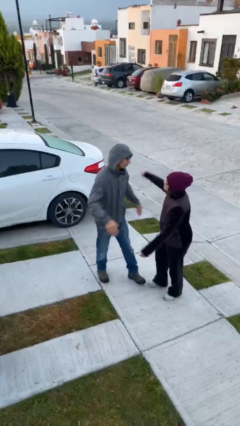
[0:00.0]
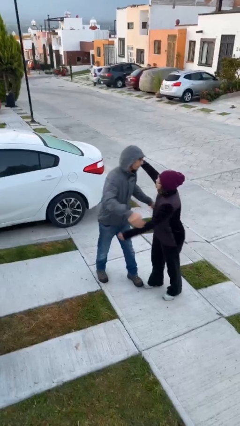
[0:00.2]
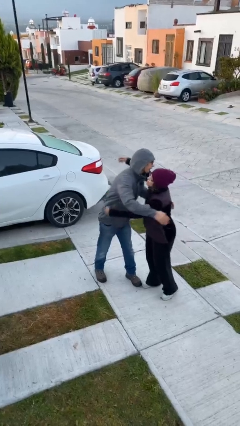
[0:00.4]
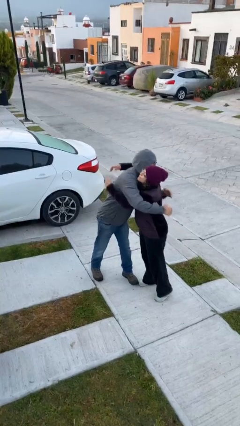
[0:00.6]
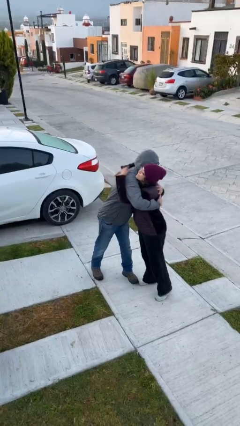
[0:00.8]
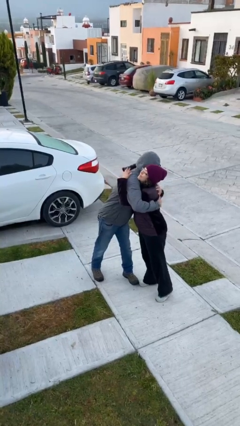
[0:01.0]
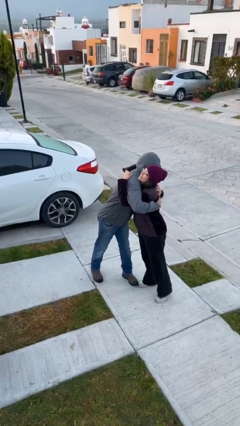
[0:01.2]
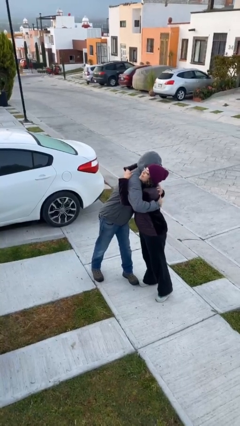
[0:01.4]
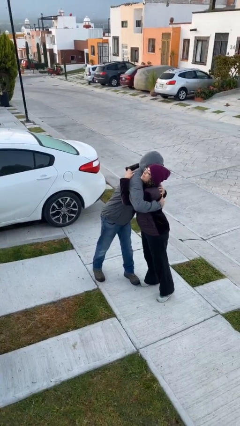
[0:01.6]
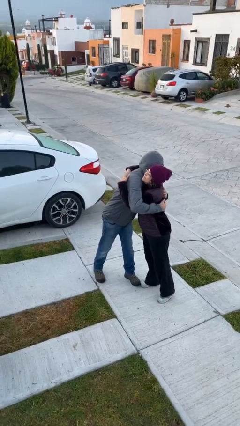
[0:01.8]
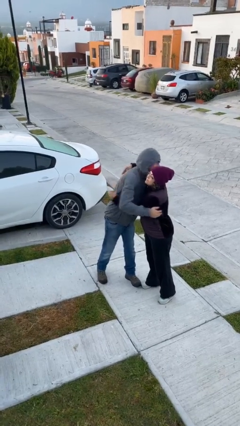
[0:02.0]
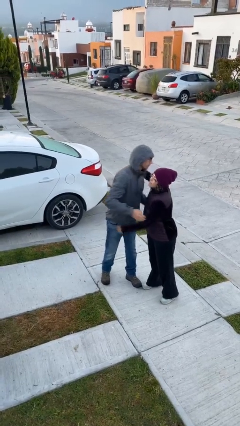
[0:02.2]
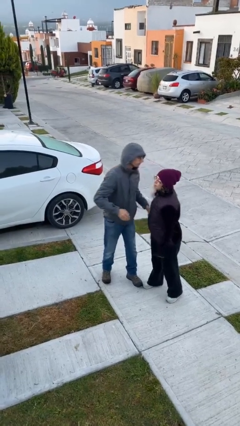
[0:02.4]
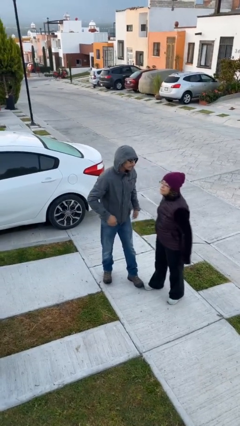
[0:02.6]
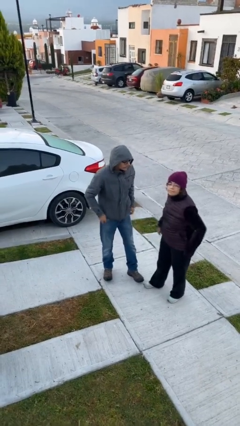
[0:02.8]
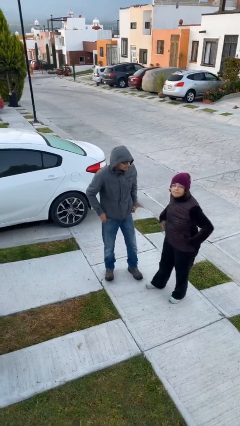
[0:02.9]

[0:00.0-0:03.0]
person embraces person

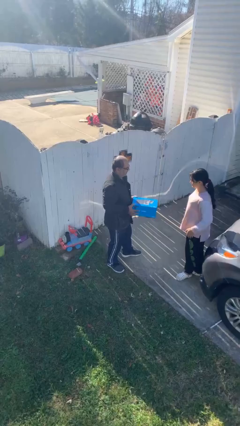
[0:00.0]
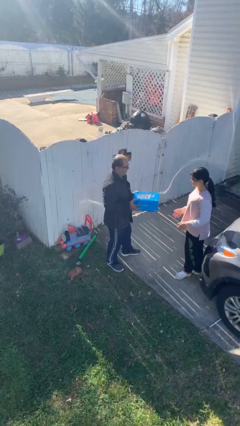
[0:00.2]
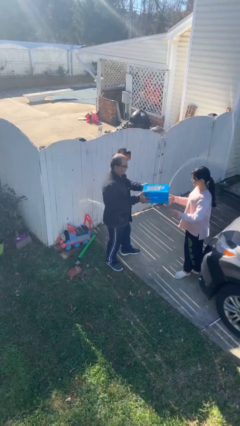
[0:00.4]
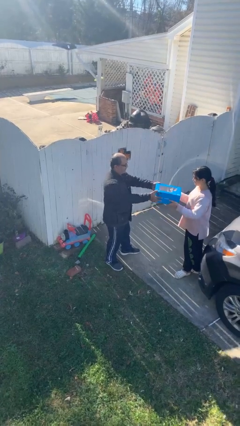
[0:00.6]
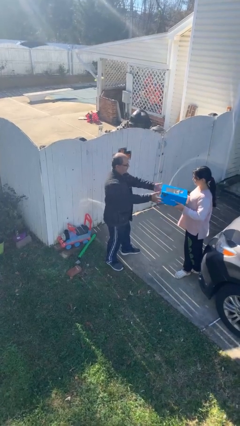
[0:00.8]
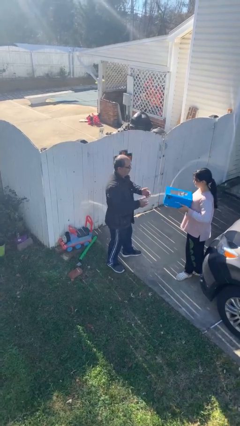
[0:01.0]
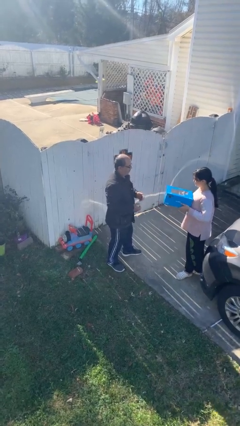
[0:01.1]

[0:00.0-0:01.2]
person transfers object to person

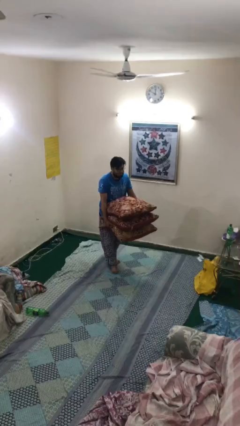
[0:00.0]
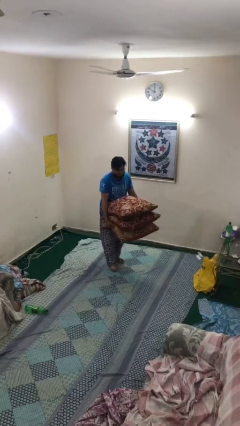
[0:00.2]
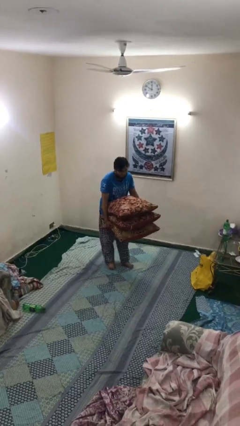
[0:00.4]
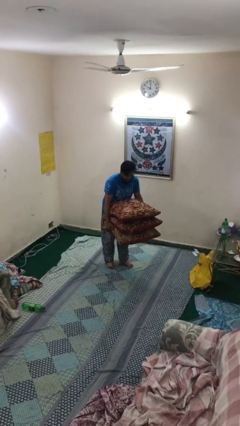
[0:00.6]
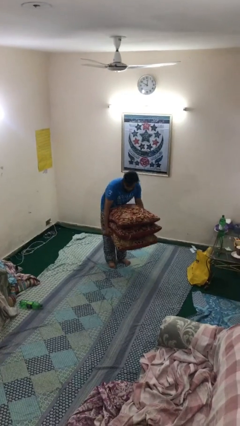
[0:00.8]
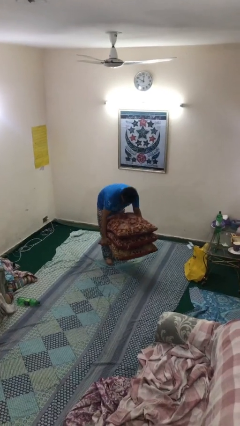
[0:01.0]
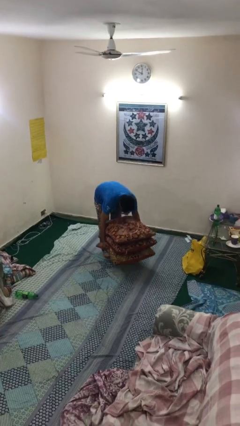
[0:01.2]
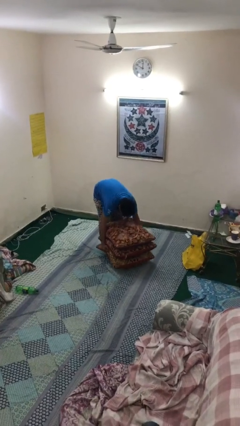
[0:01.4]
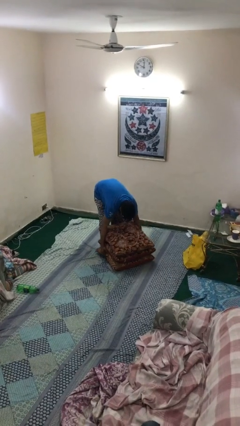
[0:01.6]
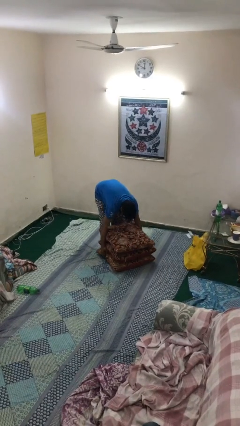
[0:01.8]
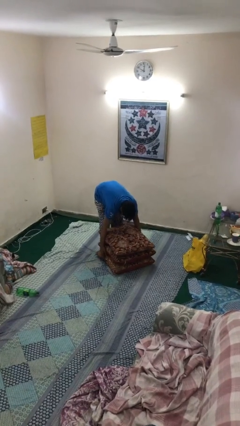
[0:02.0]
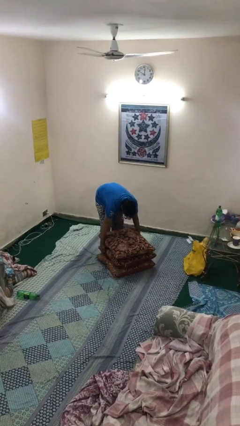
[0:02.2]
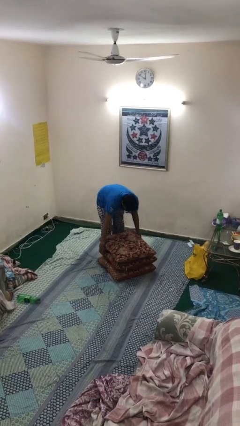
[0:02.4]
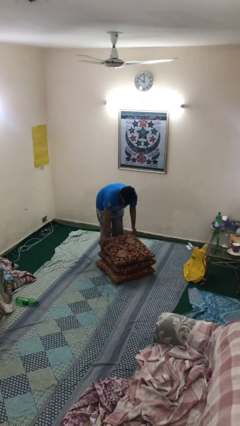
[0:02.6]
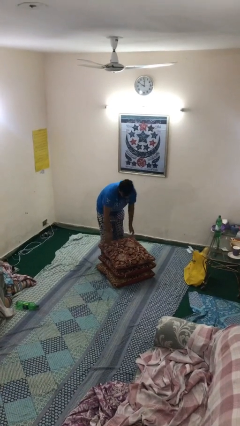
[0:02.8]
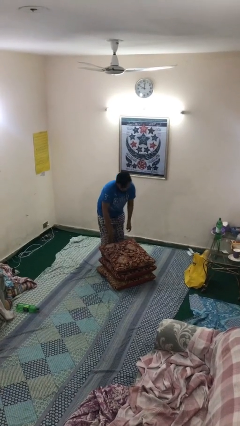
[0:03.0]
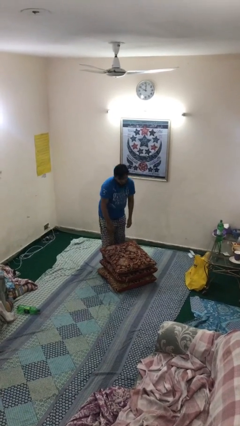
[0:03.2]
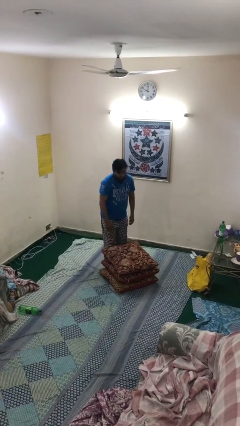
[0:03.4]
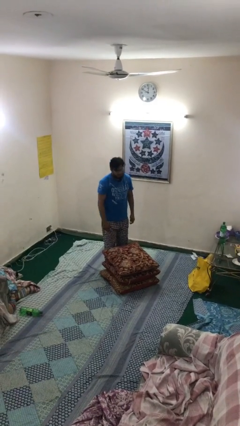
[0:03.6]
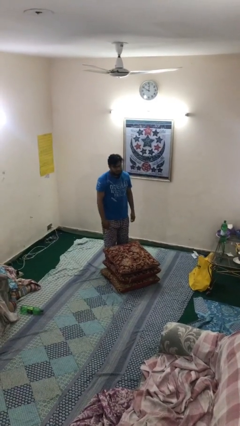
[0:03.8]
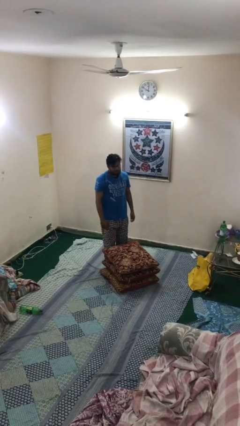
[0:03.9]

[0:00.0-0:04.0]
person puts down object on floor

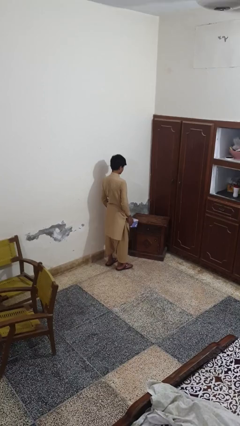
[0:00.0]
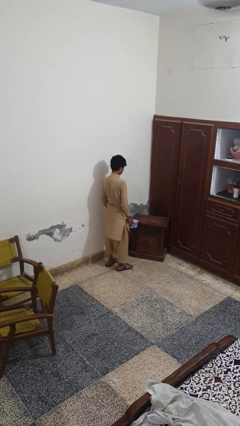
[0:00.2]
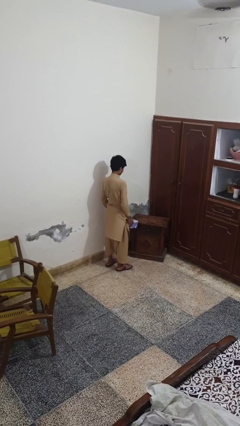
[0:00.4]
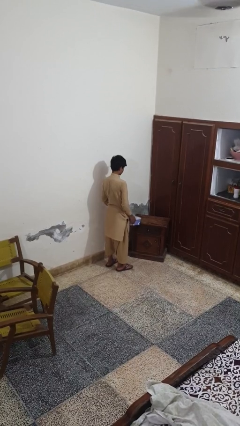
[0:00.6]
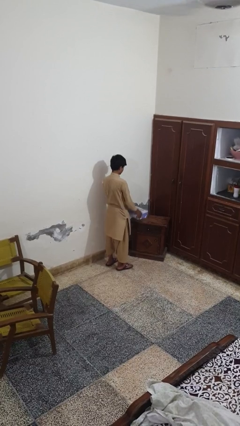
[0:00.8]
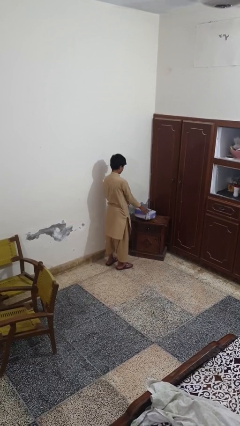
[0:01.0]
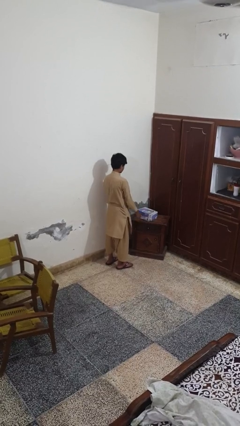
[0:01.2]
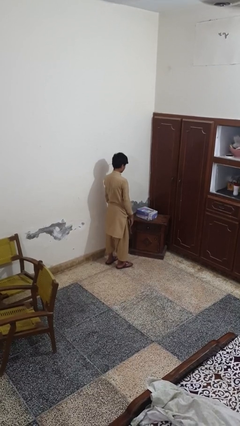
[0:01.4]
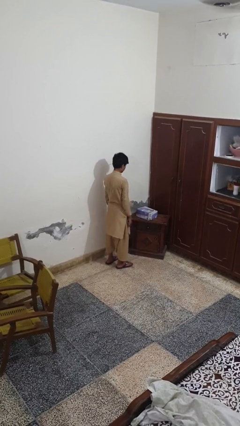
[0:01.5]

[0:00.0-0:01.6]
person throws object on table

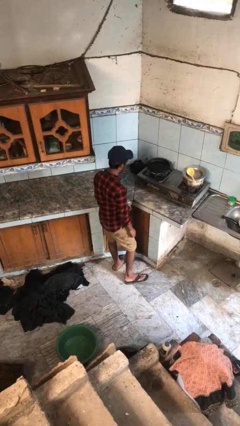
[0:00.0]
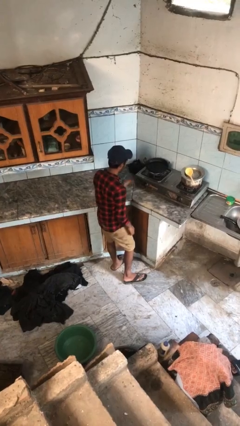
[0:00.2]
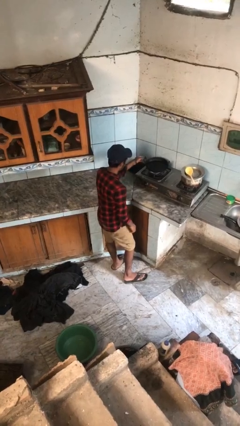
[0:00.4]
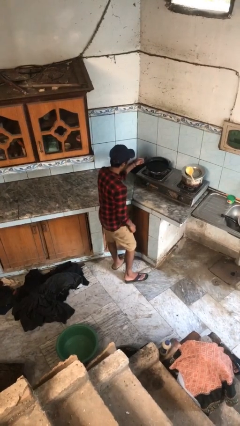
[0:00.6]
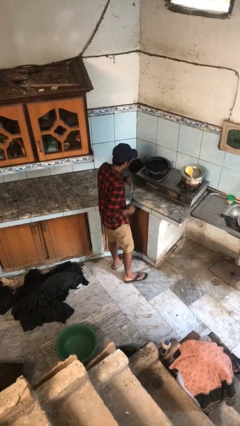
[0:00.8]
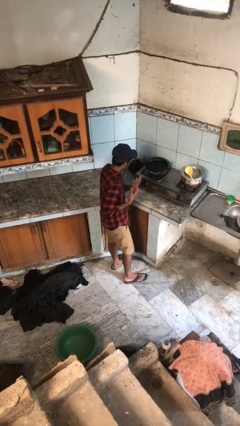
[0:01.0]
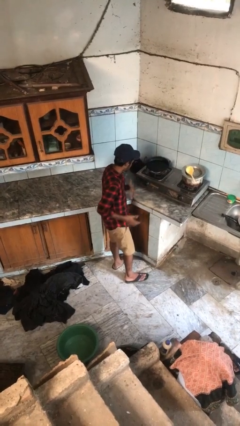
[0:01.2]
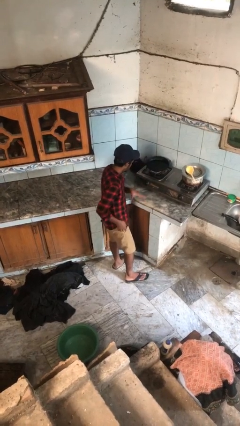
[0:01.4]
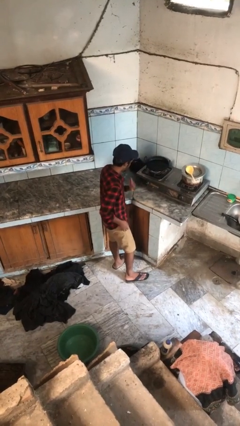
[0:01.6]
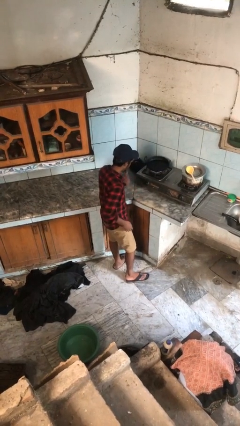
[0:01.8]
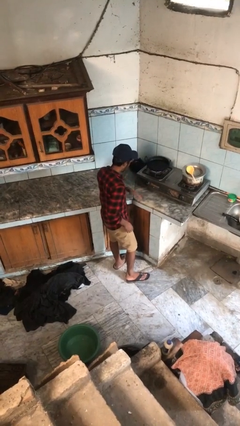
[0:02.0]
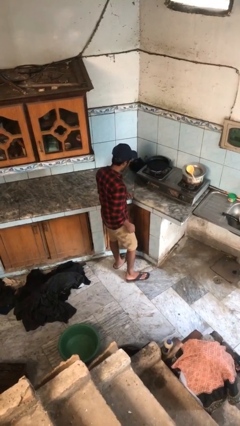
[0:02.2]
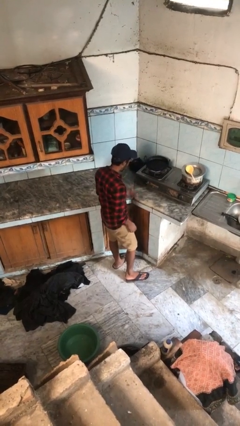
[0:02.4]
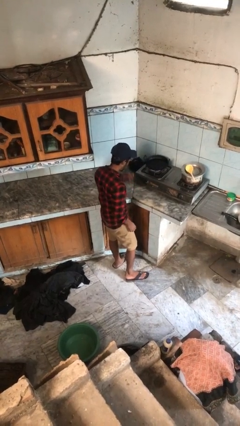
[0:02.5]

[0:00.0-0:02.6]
person burns hand

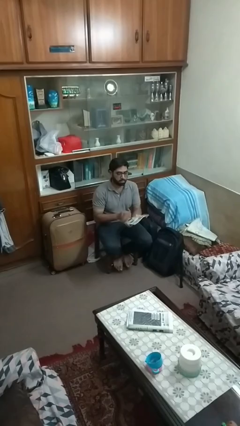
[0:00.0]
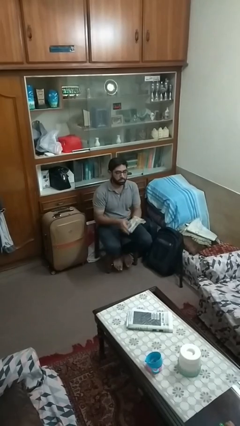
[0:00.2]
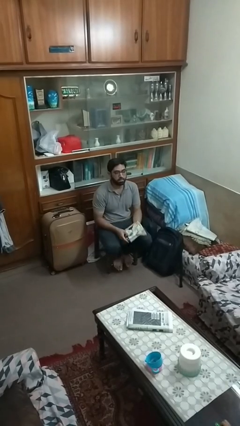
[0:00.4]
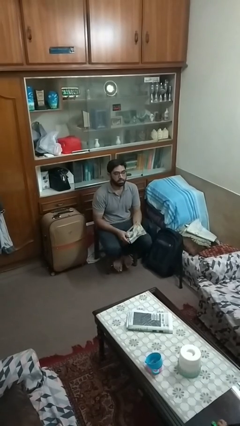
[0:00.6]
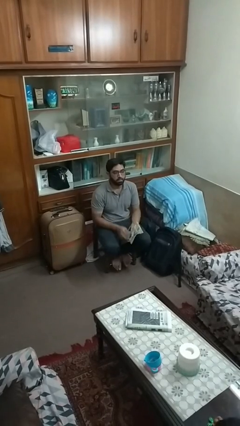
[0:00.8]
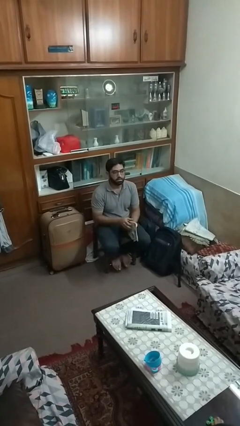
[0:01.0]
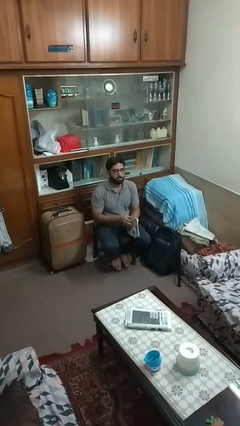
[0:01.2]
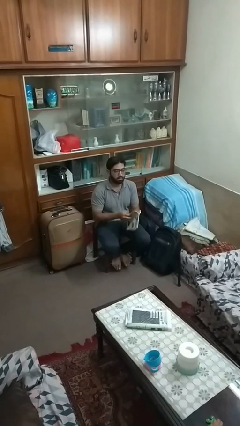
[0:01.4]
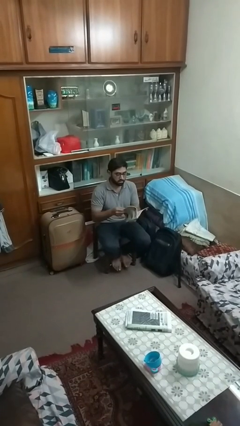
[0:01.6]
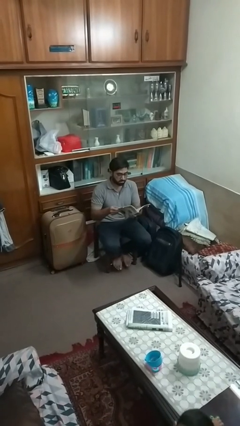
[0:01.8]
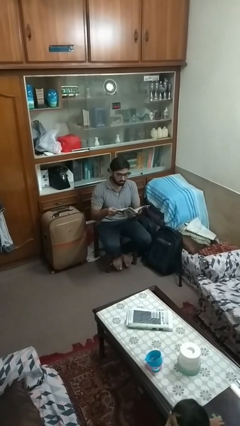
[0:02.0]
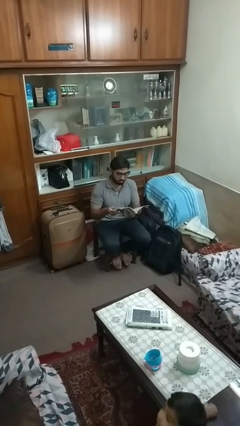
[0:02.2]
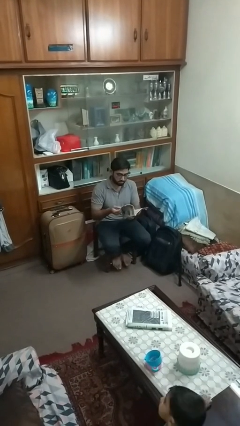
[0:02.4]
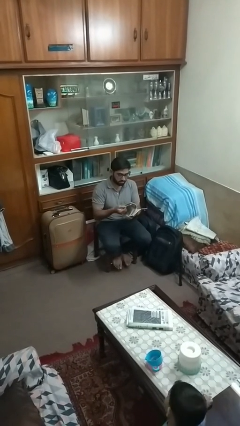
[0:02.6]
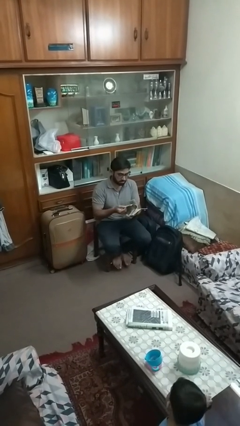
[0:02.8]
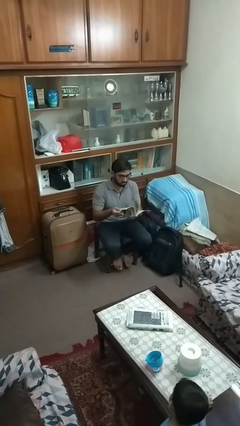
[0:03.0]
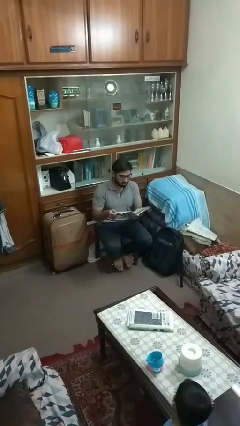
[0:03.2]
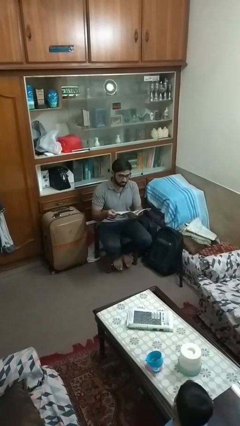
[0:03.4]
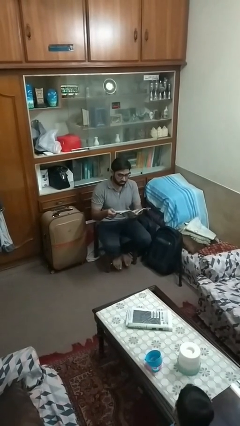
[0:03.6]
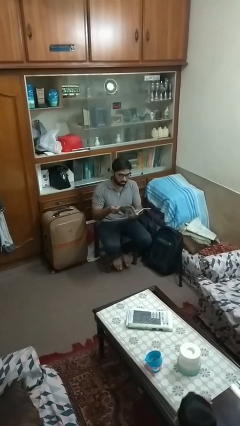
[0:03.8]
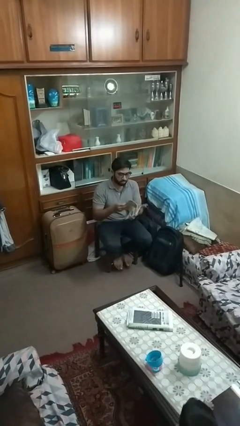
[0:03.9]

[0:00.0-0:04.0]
person reads magazine

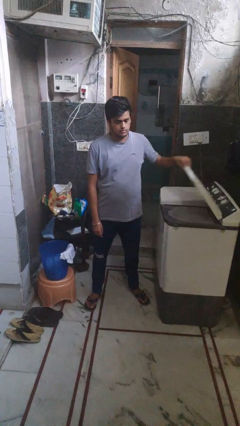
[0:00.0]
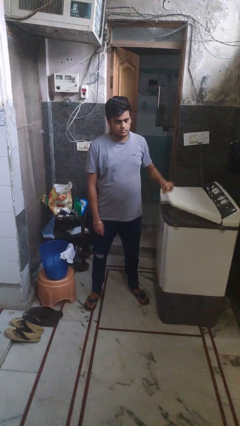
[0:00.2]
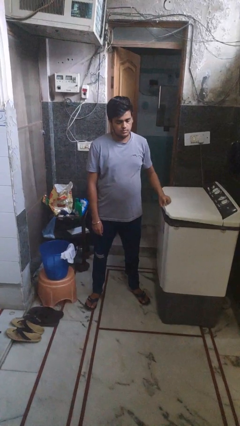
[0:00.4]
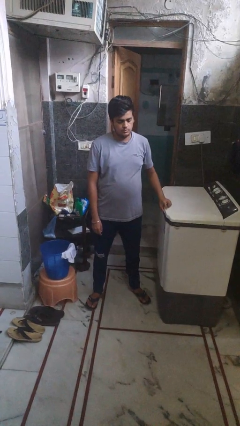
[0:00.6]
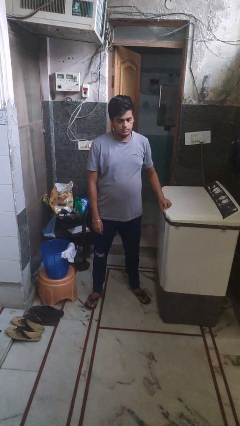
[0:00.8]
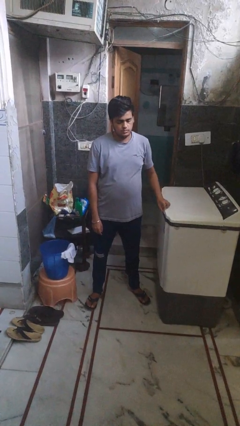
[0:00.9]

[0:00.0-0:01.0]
person closes clothes washer
